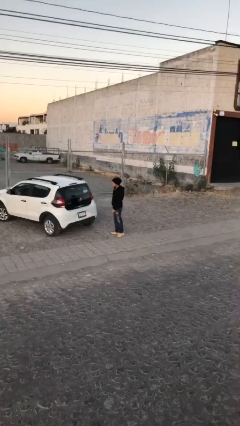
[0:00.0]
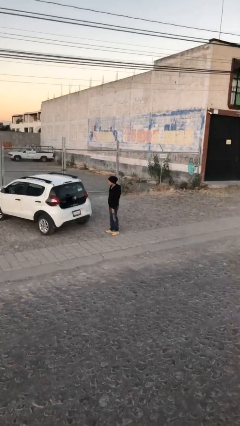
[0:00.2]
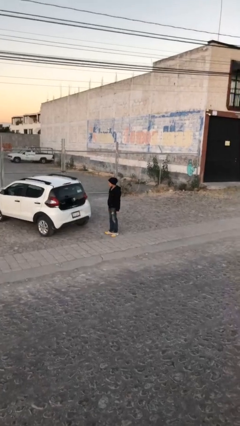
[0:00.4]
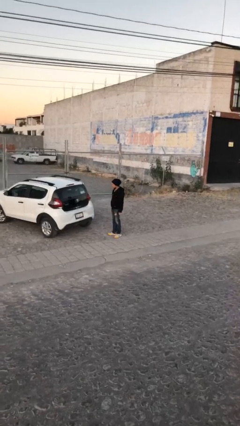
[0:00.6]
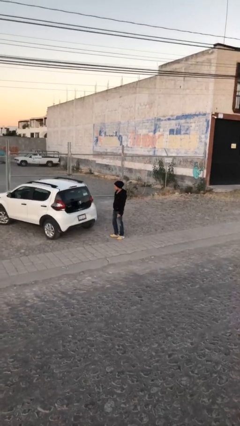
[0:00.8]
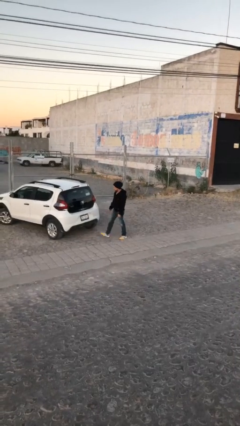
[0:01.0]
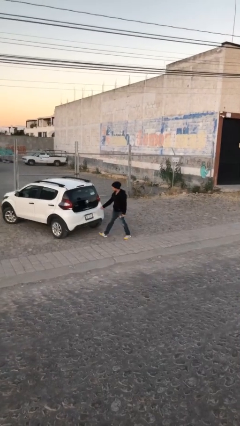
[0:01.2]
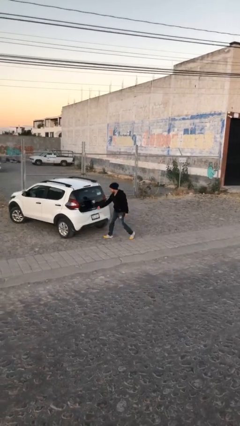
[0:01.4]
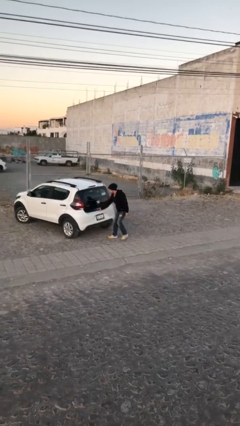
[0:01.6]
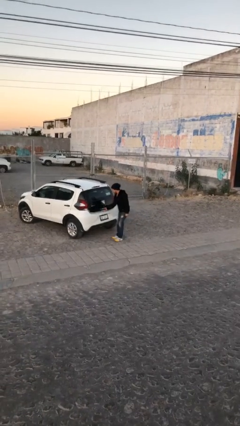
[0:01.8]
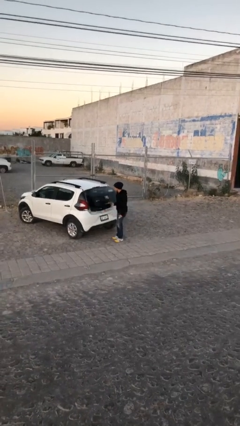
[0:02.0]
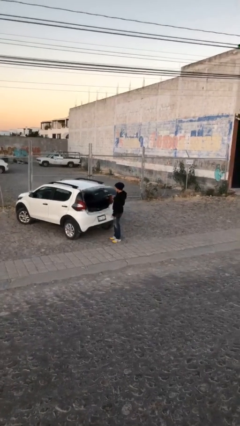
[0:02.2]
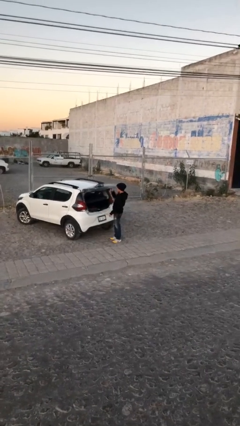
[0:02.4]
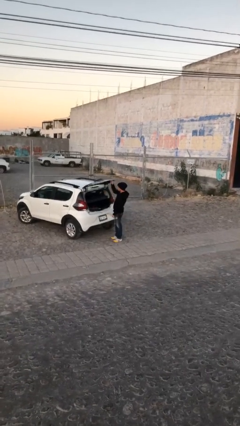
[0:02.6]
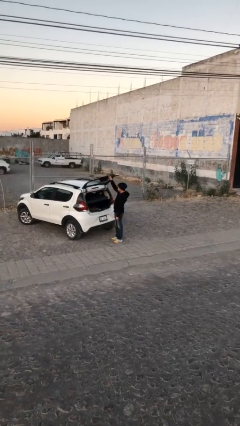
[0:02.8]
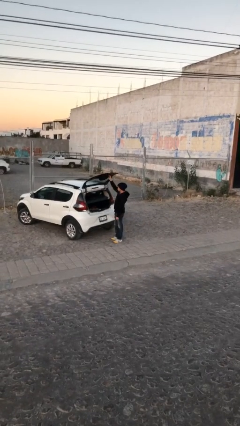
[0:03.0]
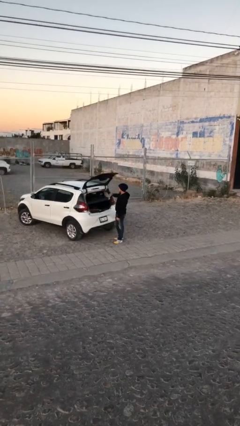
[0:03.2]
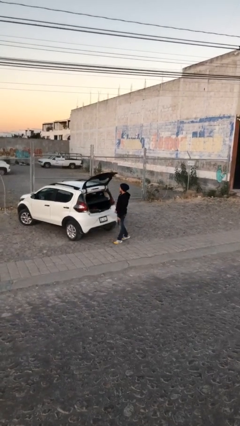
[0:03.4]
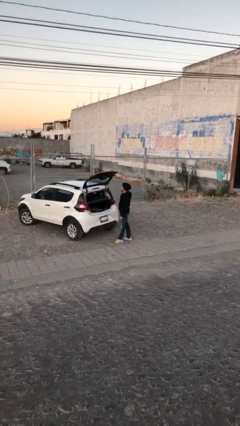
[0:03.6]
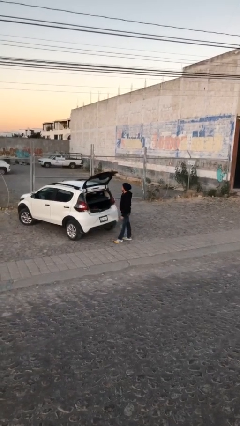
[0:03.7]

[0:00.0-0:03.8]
person opens car trunk

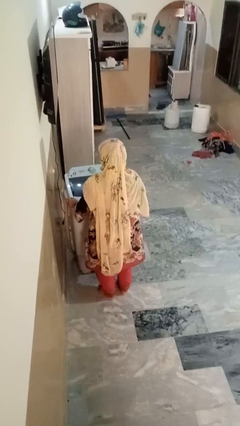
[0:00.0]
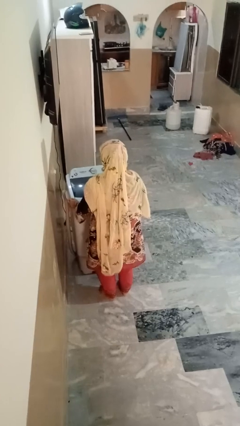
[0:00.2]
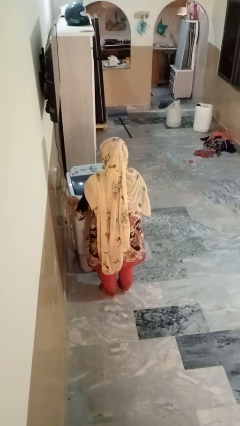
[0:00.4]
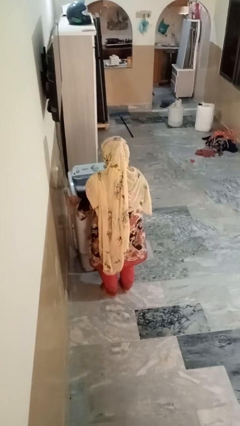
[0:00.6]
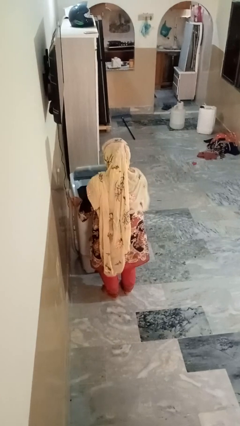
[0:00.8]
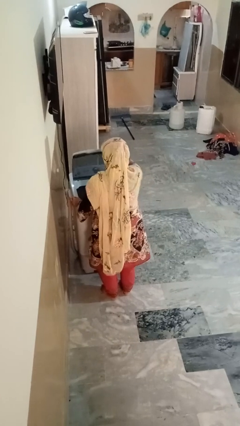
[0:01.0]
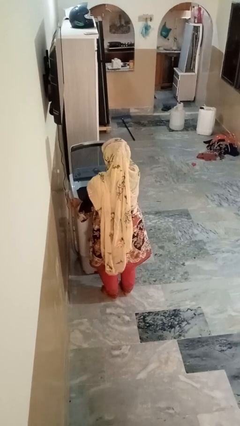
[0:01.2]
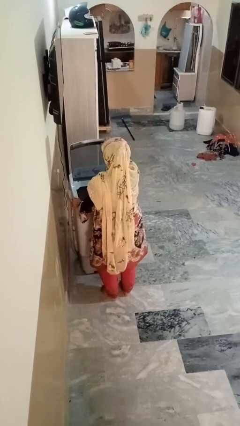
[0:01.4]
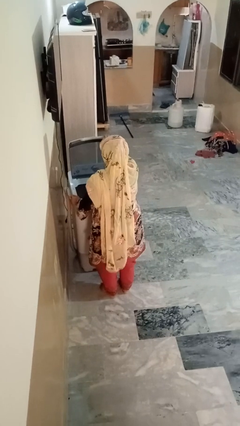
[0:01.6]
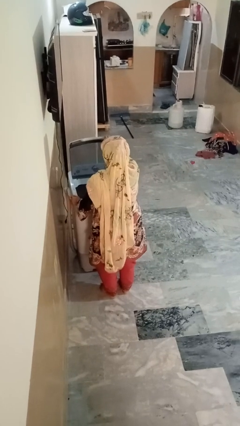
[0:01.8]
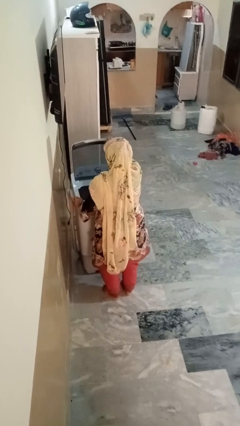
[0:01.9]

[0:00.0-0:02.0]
person opens clothes washer

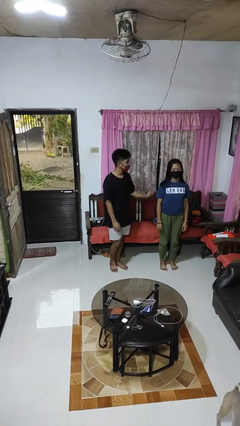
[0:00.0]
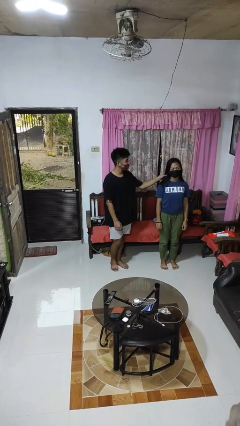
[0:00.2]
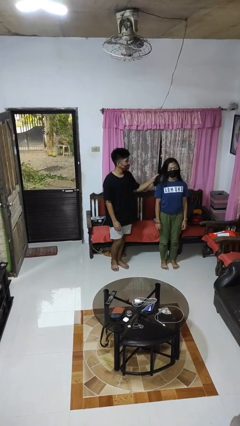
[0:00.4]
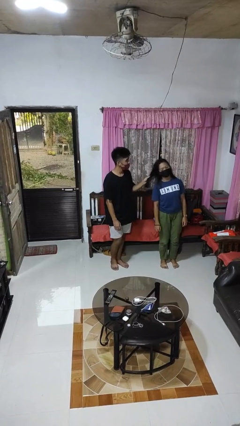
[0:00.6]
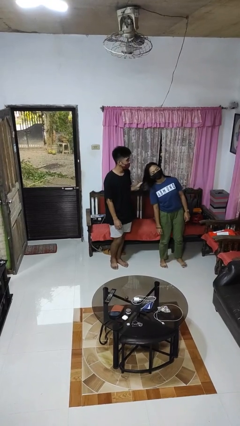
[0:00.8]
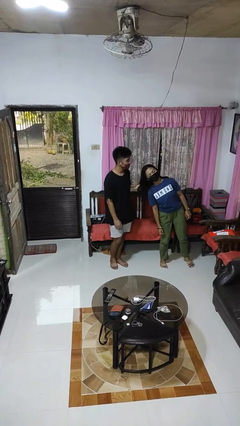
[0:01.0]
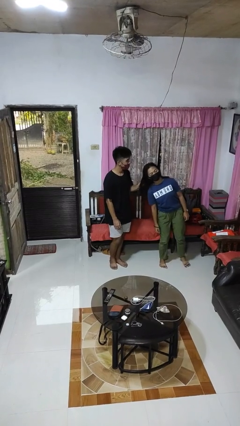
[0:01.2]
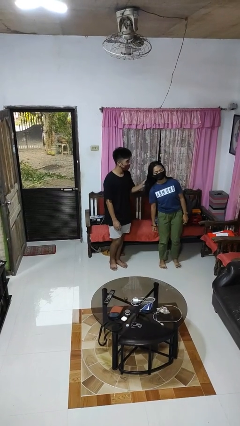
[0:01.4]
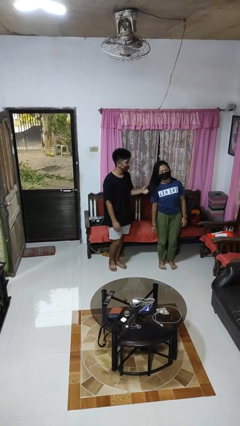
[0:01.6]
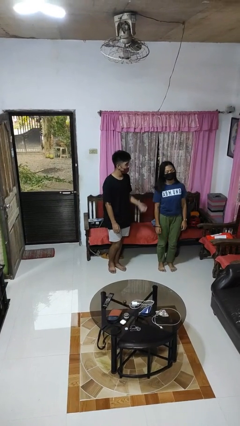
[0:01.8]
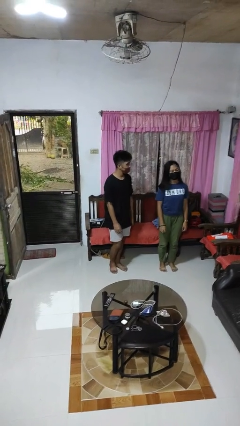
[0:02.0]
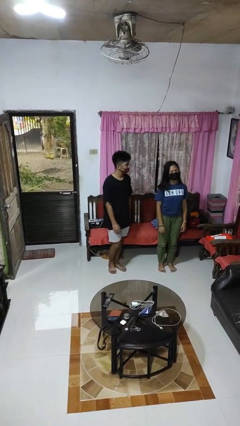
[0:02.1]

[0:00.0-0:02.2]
person grabs person by hair

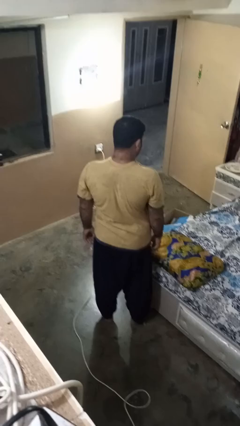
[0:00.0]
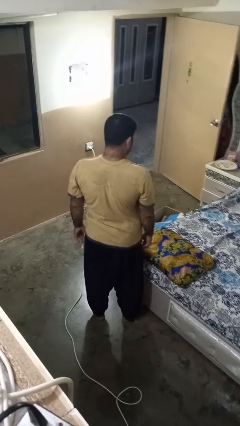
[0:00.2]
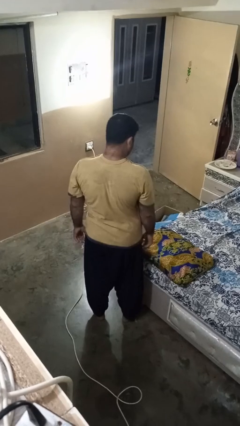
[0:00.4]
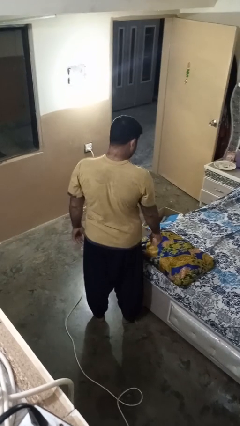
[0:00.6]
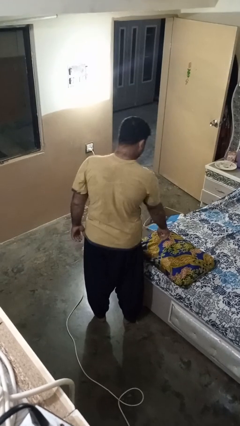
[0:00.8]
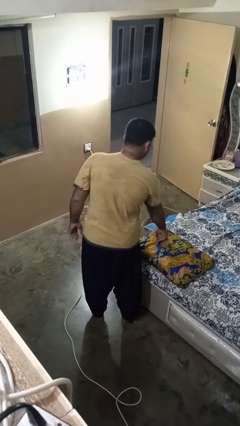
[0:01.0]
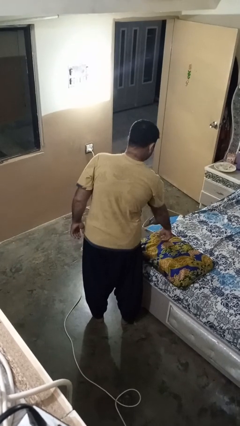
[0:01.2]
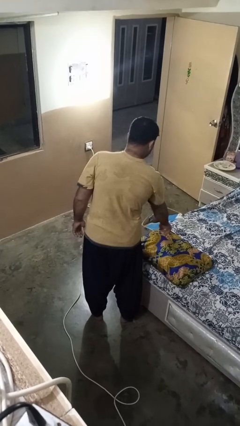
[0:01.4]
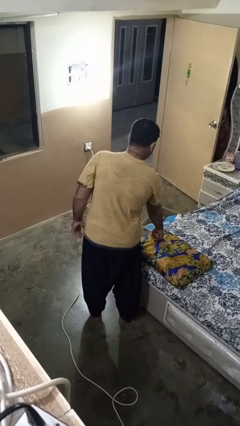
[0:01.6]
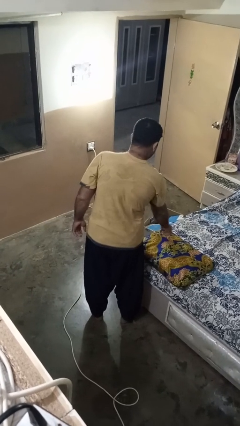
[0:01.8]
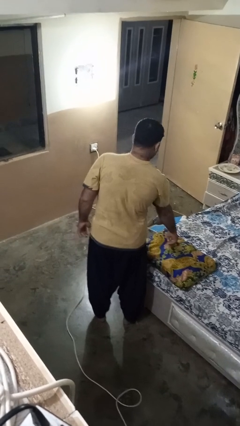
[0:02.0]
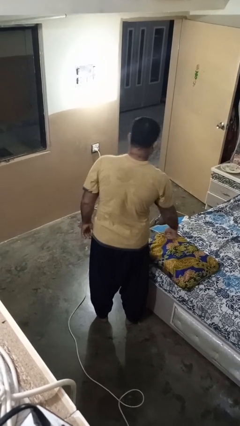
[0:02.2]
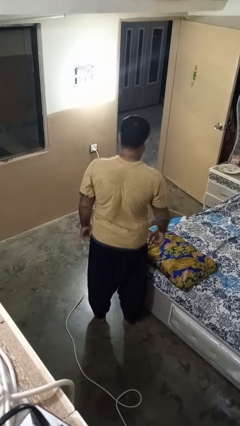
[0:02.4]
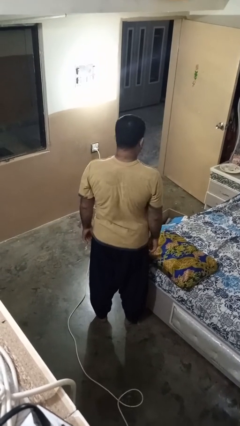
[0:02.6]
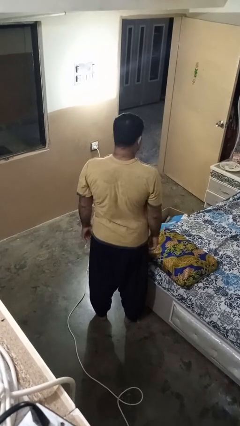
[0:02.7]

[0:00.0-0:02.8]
person taps object with finger

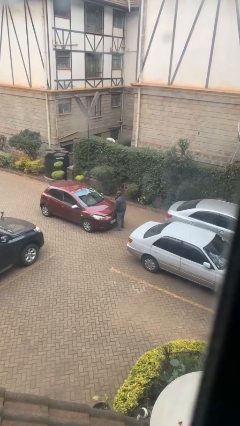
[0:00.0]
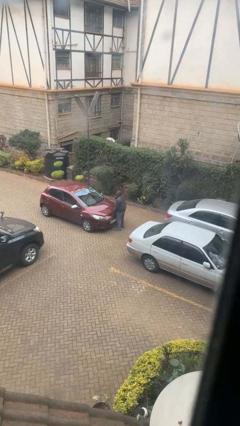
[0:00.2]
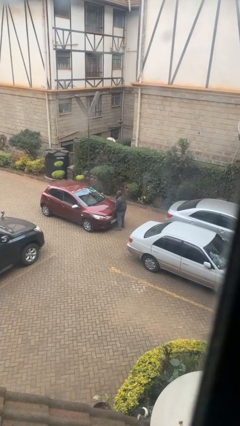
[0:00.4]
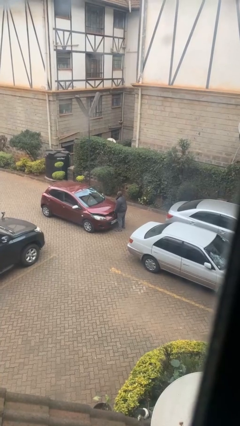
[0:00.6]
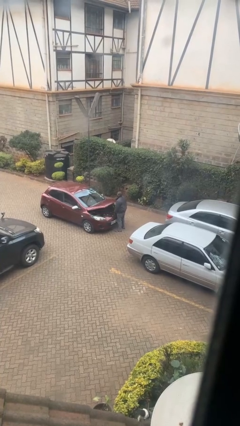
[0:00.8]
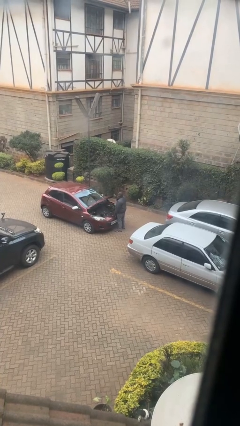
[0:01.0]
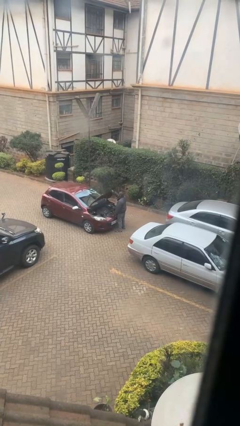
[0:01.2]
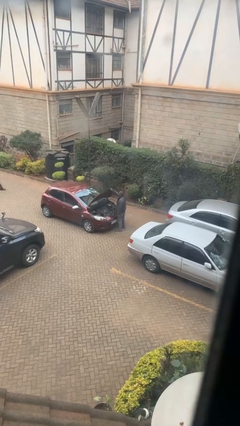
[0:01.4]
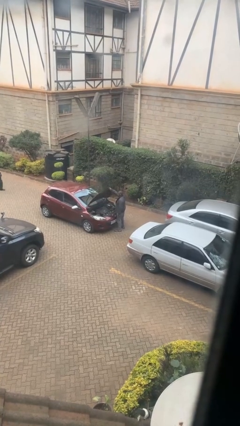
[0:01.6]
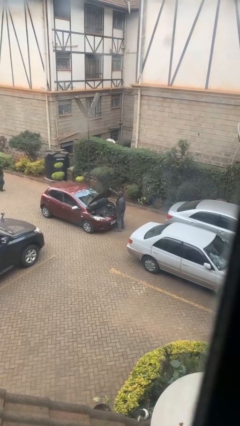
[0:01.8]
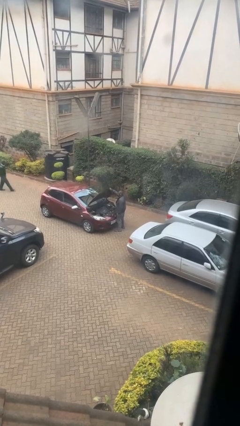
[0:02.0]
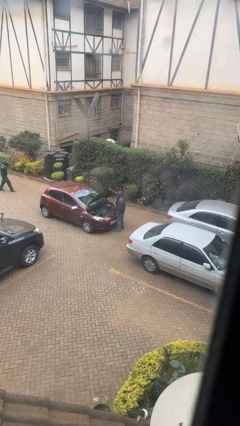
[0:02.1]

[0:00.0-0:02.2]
person opens car hood

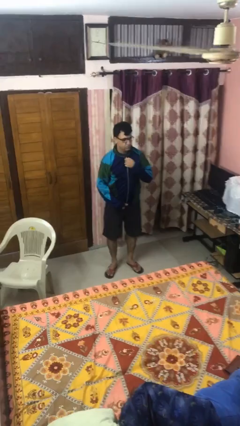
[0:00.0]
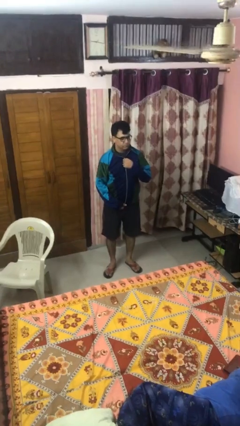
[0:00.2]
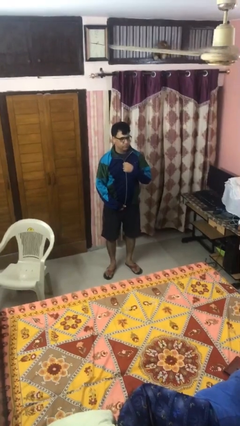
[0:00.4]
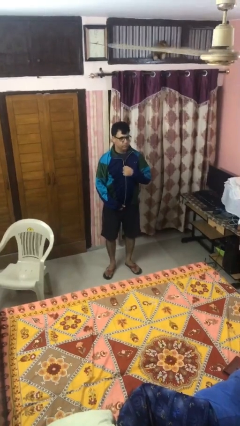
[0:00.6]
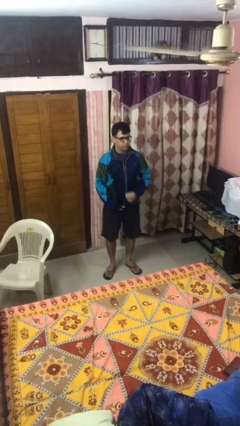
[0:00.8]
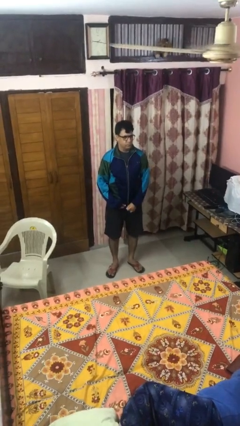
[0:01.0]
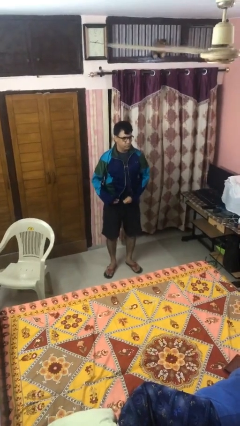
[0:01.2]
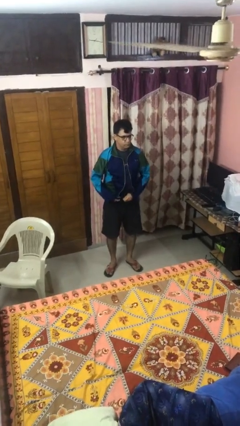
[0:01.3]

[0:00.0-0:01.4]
person unzips jacket

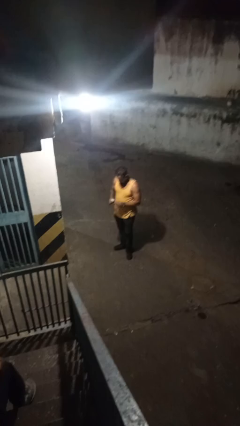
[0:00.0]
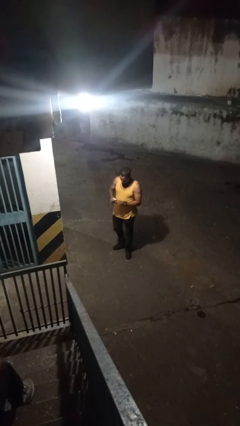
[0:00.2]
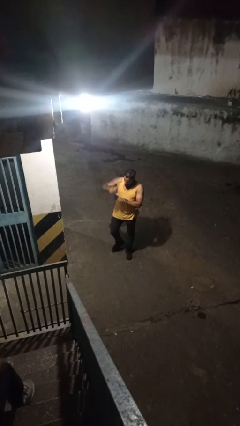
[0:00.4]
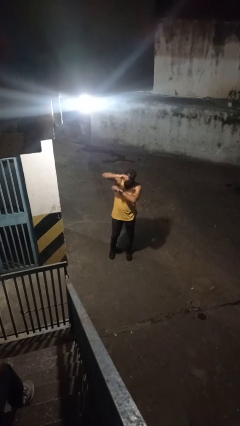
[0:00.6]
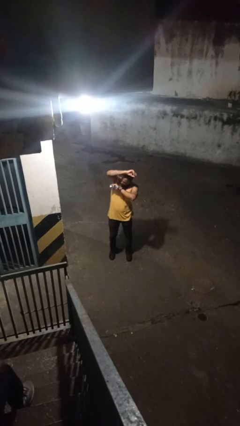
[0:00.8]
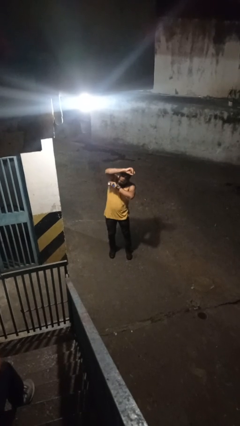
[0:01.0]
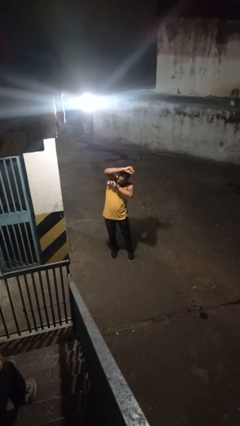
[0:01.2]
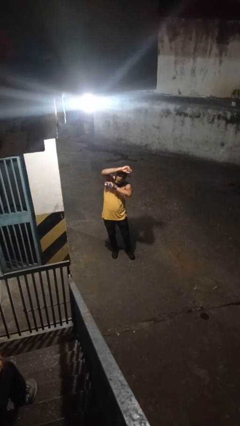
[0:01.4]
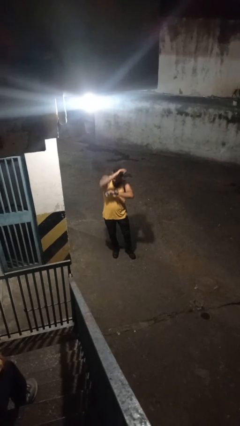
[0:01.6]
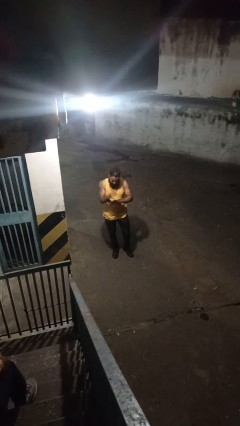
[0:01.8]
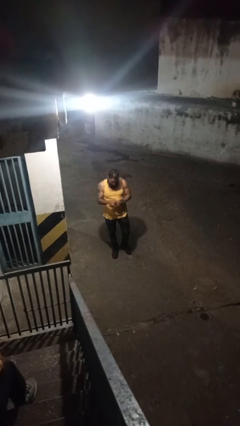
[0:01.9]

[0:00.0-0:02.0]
person applies deodorant

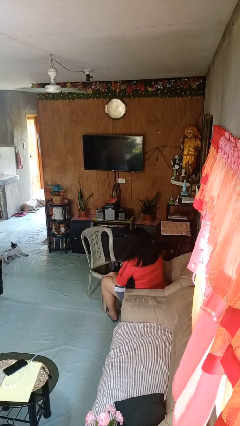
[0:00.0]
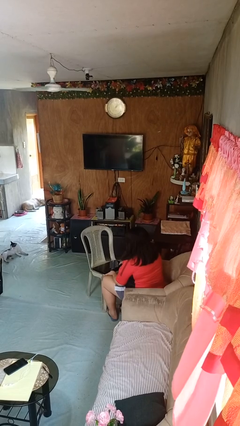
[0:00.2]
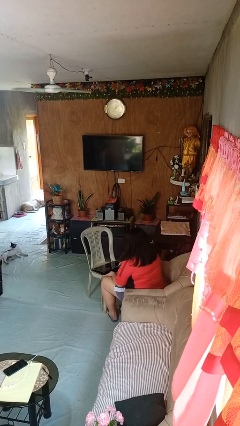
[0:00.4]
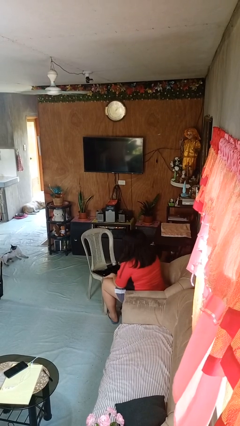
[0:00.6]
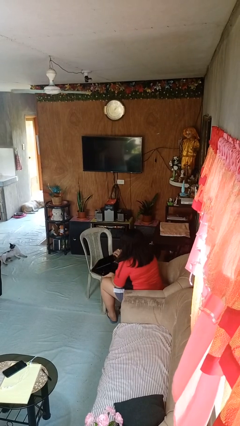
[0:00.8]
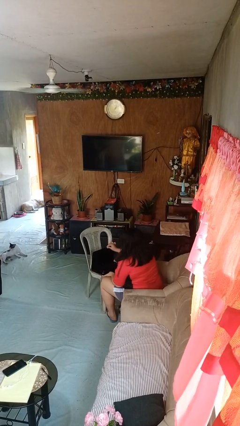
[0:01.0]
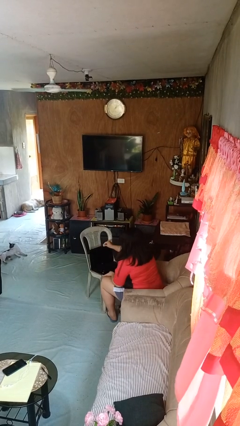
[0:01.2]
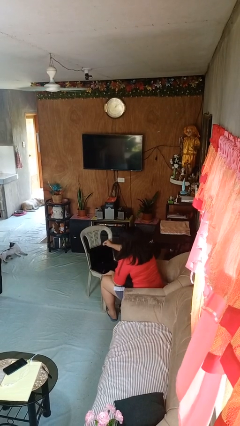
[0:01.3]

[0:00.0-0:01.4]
person opens laptop
